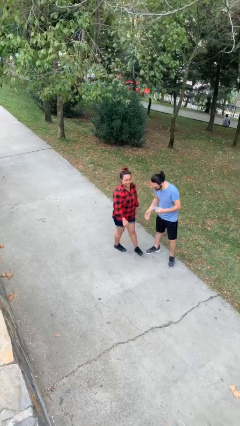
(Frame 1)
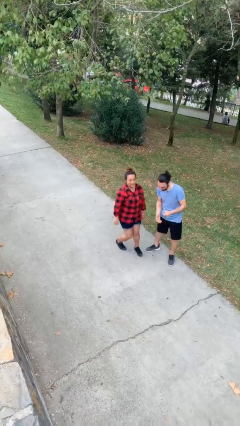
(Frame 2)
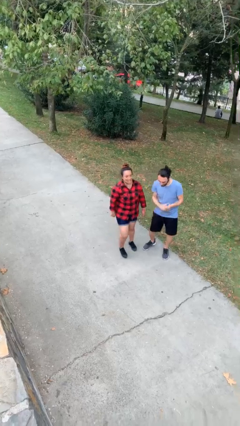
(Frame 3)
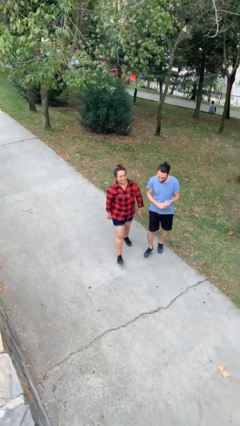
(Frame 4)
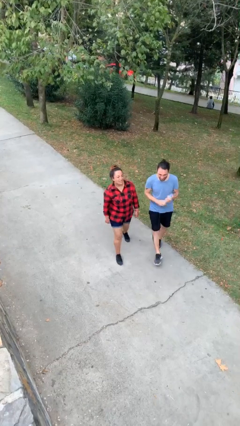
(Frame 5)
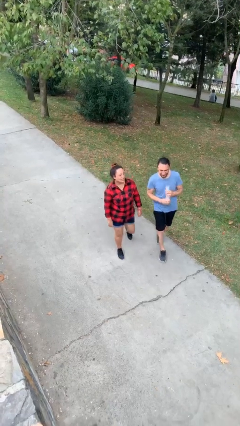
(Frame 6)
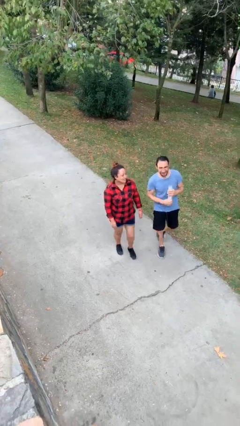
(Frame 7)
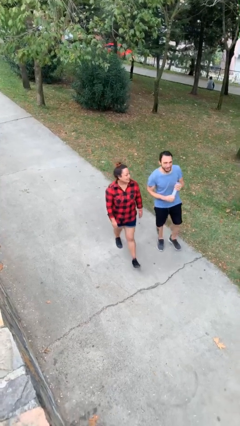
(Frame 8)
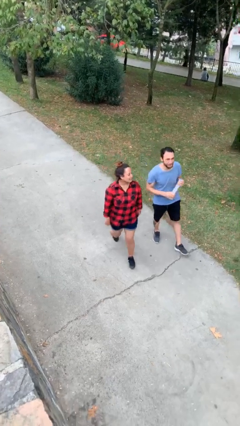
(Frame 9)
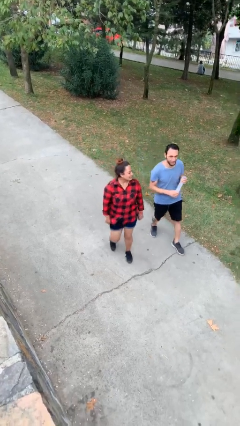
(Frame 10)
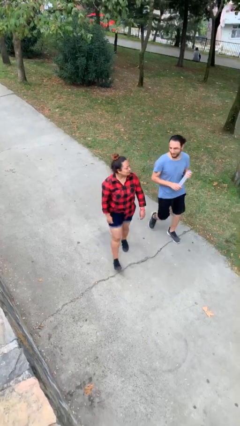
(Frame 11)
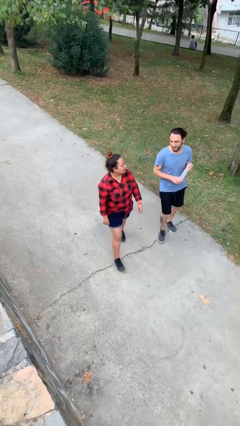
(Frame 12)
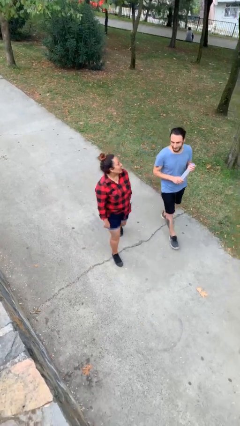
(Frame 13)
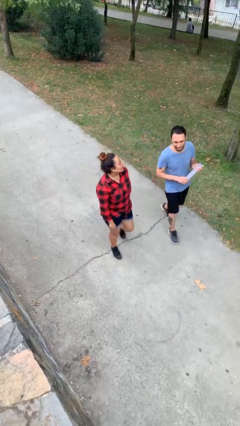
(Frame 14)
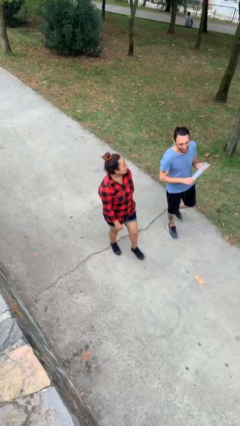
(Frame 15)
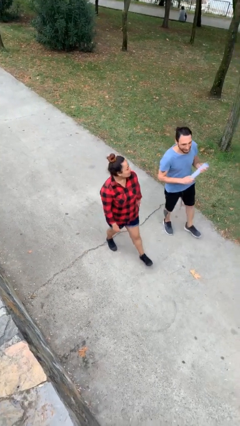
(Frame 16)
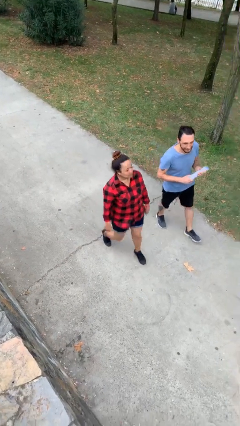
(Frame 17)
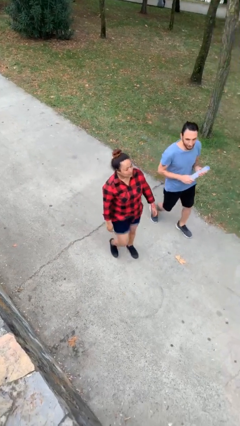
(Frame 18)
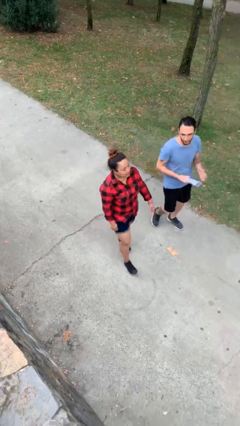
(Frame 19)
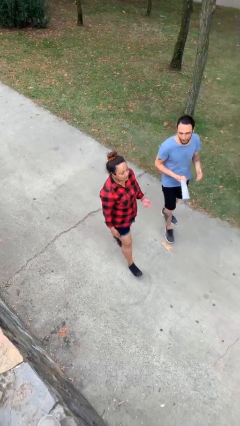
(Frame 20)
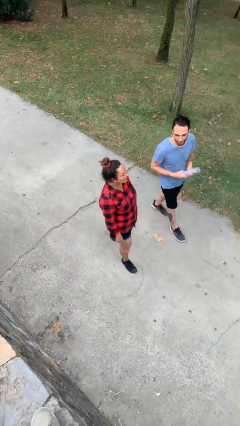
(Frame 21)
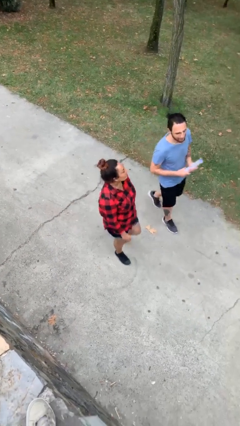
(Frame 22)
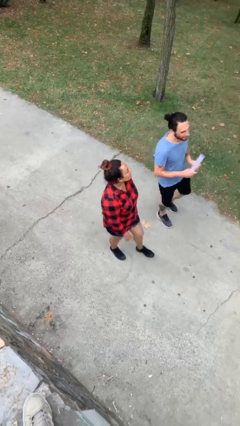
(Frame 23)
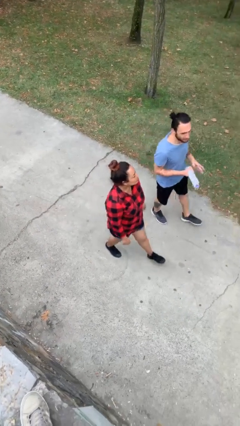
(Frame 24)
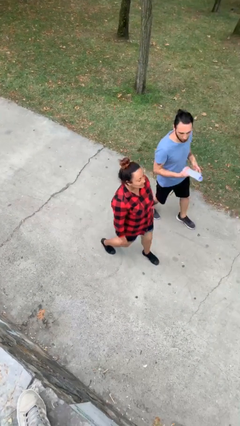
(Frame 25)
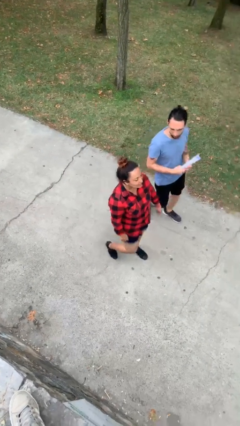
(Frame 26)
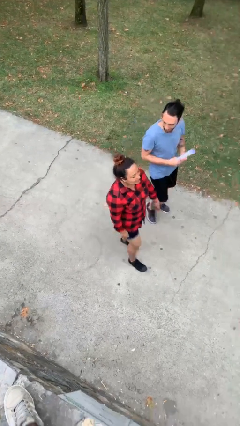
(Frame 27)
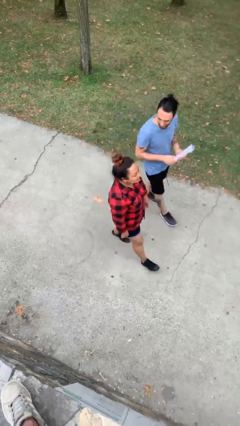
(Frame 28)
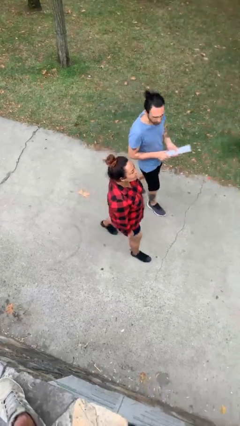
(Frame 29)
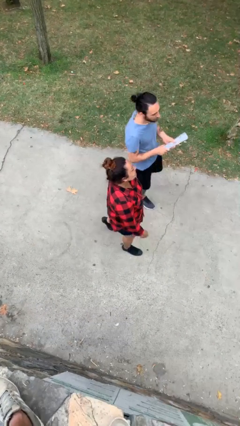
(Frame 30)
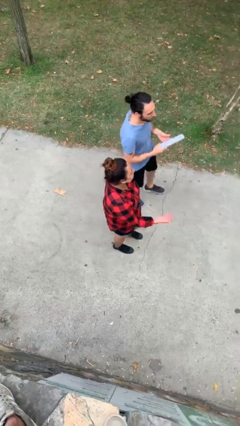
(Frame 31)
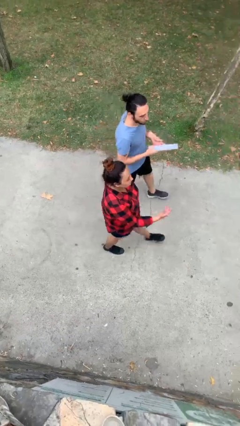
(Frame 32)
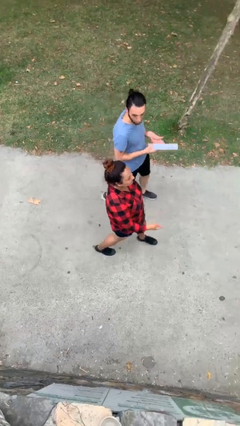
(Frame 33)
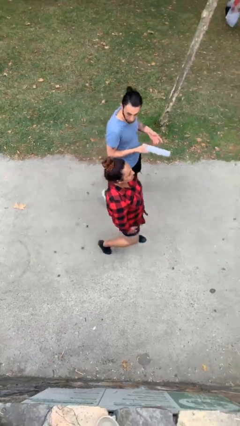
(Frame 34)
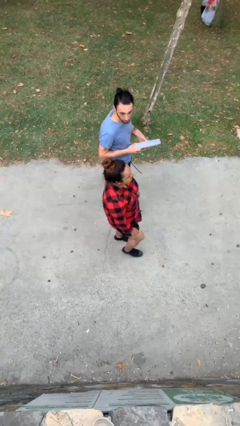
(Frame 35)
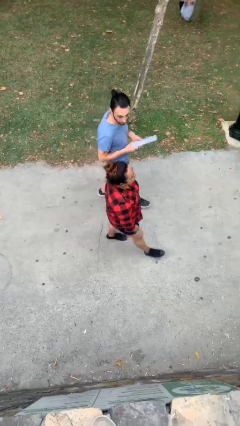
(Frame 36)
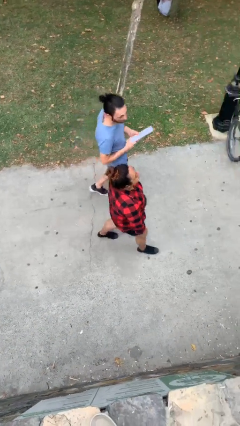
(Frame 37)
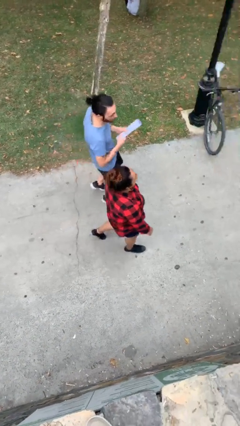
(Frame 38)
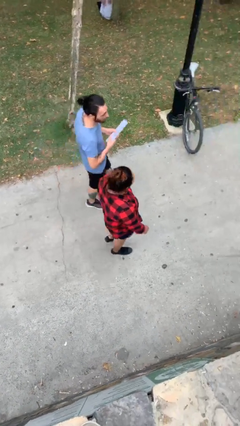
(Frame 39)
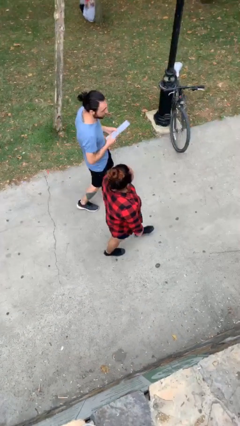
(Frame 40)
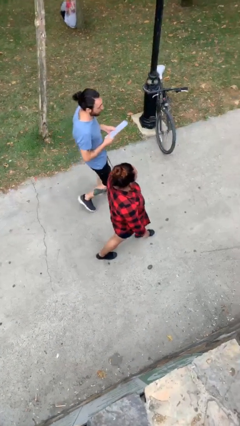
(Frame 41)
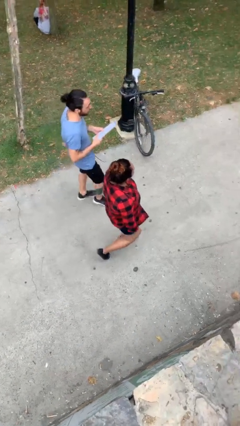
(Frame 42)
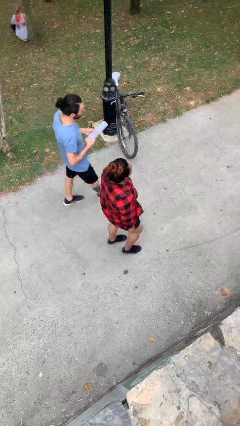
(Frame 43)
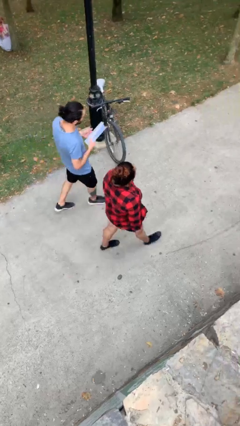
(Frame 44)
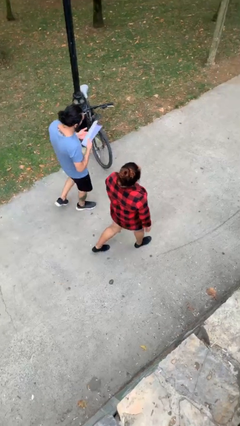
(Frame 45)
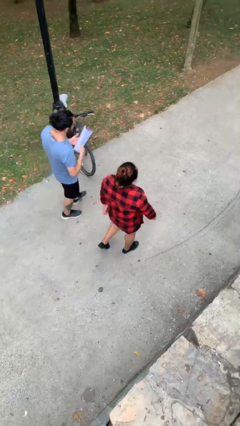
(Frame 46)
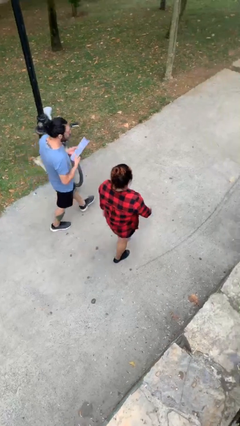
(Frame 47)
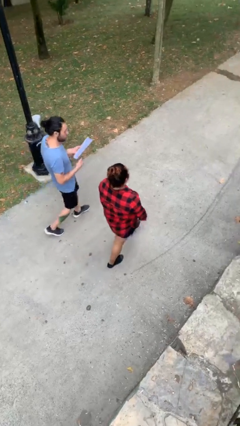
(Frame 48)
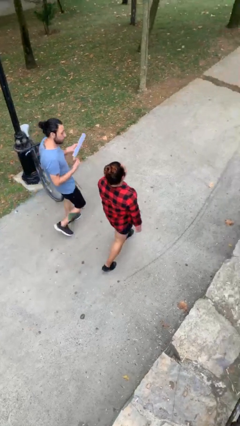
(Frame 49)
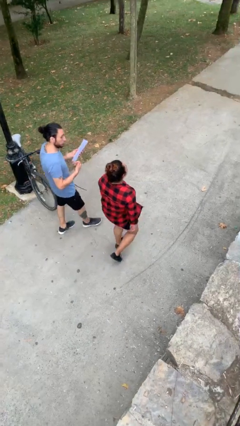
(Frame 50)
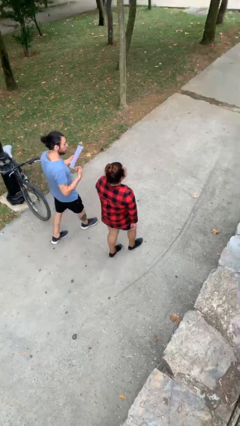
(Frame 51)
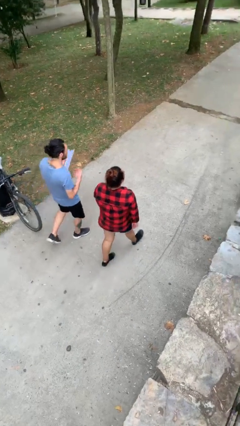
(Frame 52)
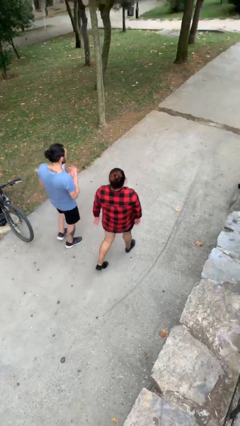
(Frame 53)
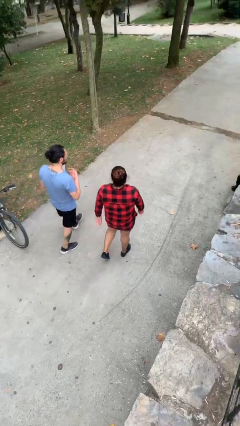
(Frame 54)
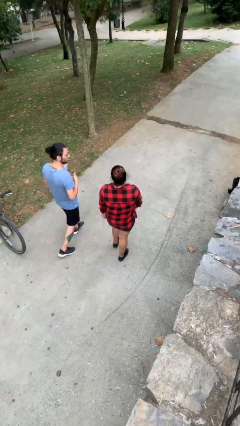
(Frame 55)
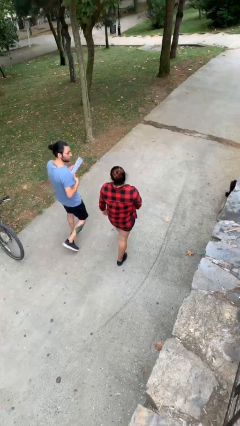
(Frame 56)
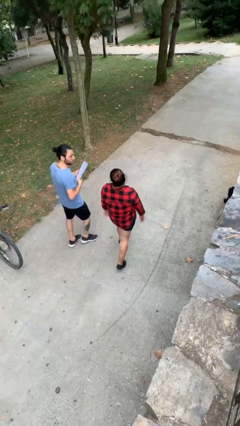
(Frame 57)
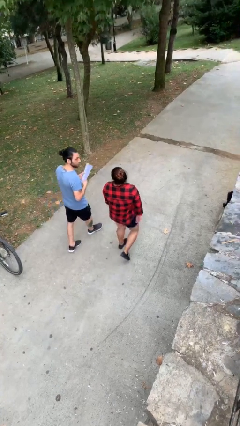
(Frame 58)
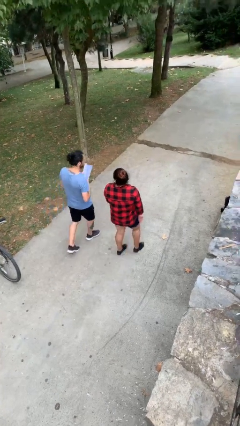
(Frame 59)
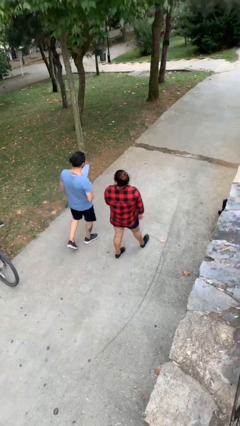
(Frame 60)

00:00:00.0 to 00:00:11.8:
person talks to person

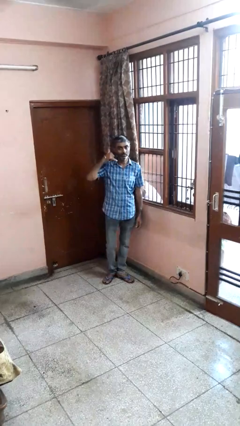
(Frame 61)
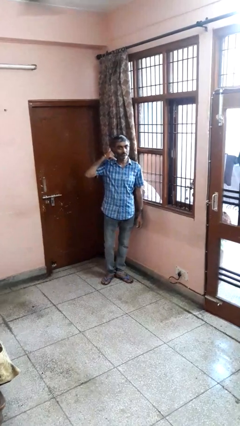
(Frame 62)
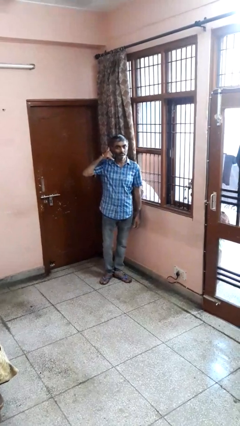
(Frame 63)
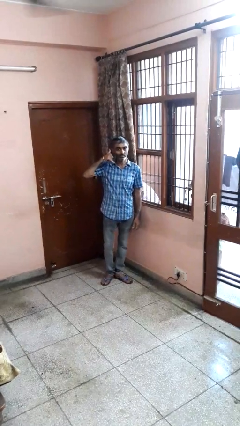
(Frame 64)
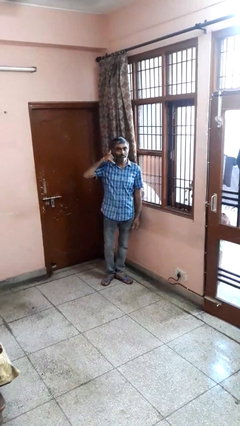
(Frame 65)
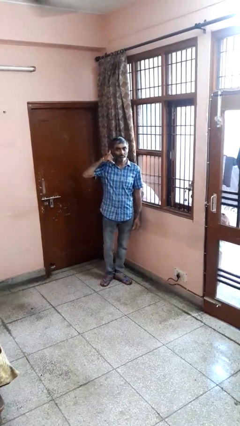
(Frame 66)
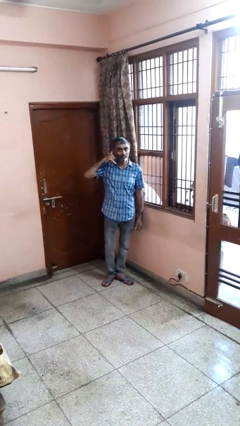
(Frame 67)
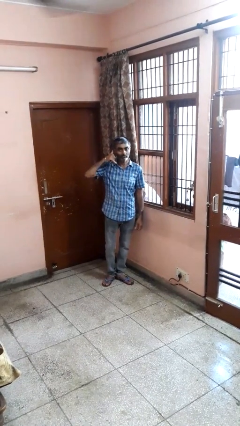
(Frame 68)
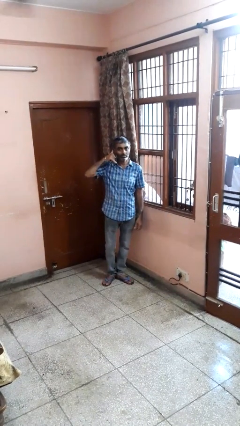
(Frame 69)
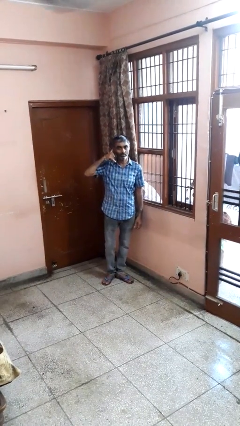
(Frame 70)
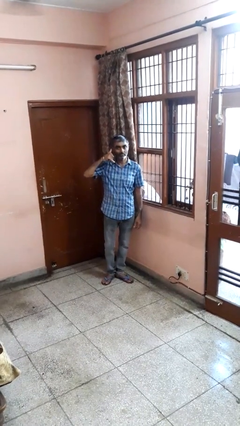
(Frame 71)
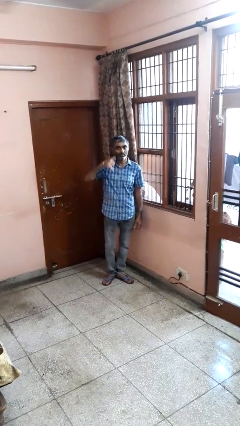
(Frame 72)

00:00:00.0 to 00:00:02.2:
person gestures call me

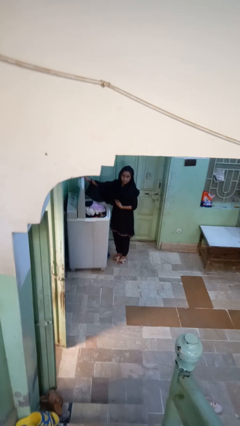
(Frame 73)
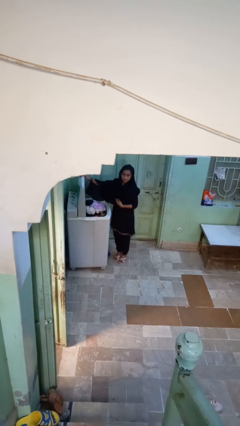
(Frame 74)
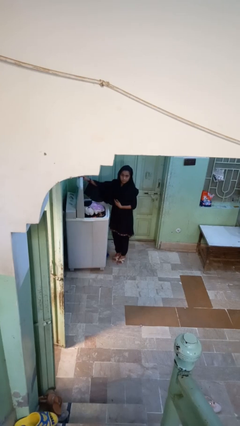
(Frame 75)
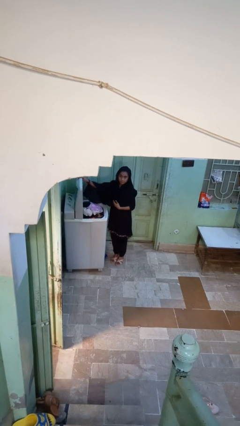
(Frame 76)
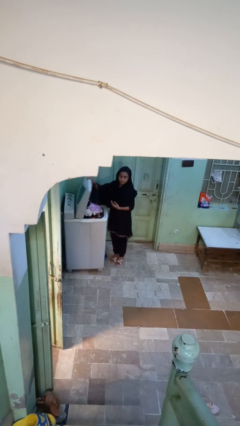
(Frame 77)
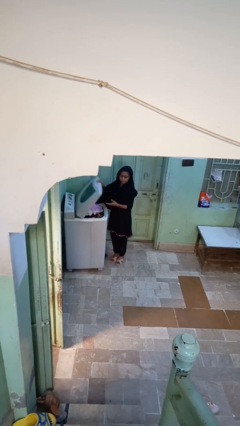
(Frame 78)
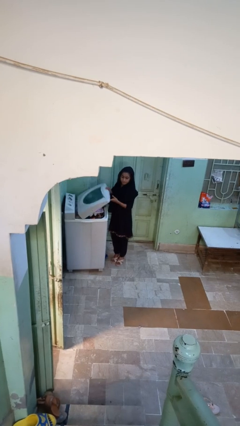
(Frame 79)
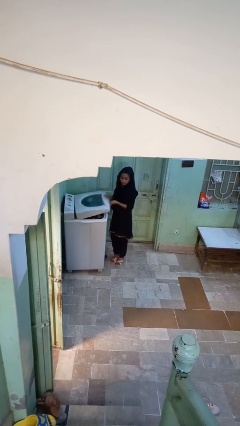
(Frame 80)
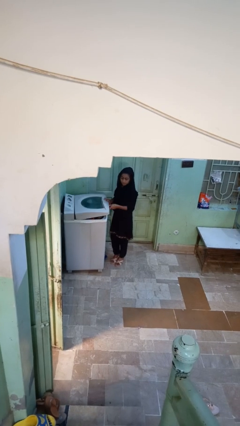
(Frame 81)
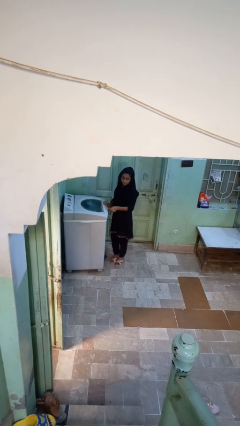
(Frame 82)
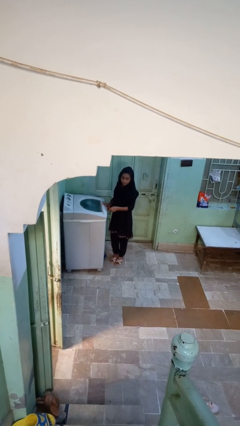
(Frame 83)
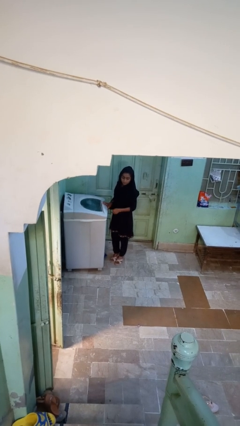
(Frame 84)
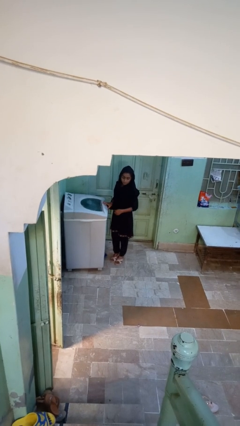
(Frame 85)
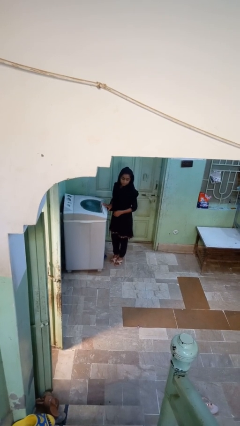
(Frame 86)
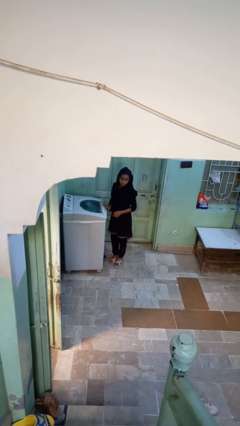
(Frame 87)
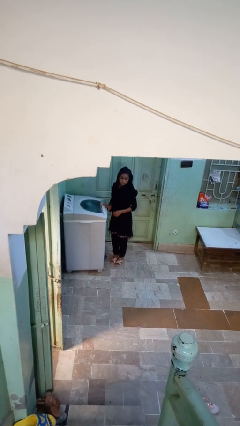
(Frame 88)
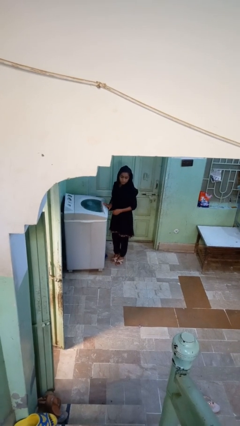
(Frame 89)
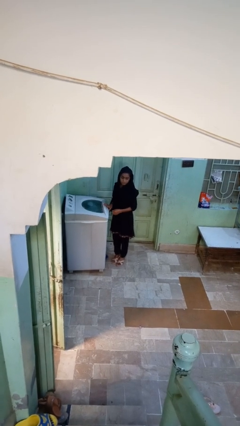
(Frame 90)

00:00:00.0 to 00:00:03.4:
person closes clothes washer

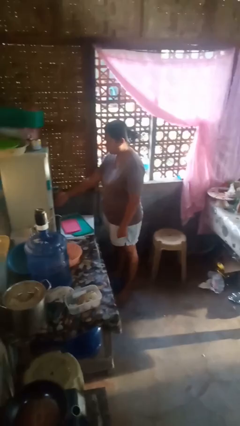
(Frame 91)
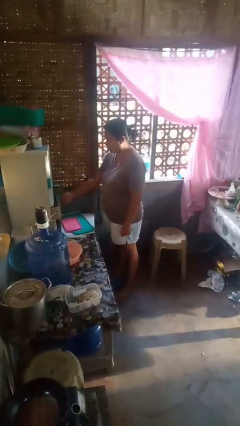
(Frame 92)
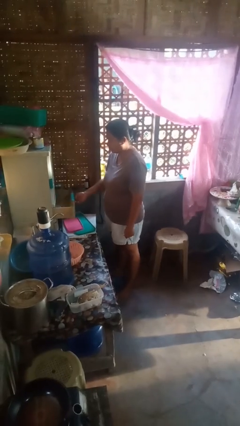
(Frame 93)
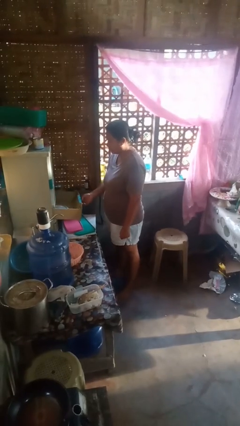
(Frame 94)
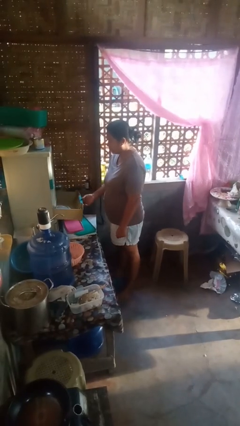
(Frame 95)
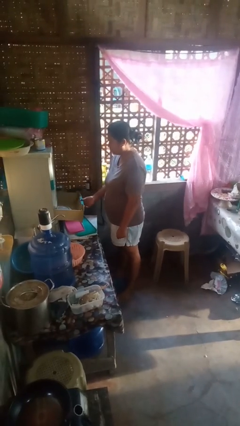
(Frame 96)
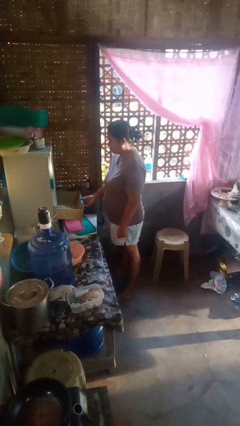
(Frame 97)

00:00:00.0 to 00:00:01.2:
person opens kitchen drawer
